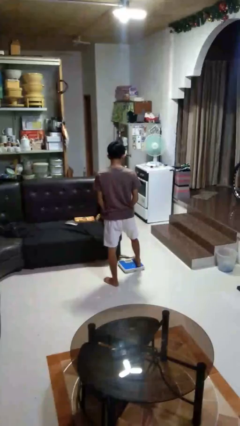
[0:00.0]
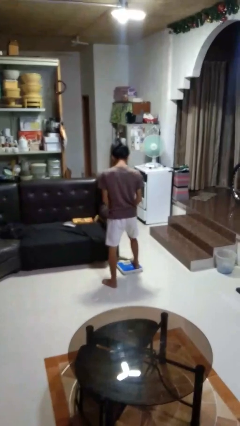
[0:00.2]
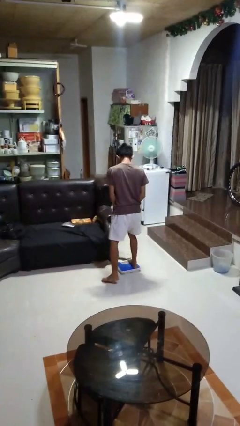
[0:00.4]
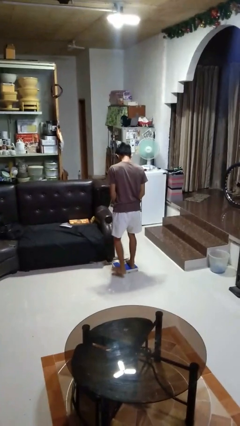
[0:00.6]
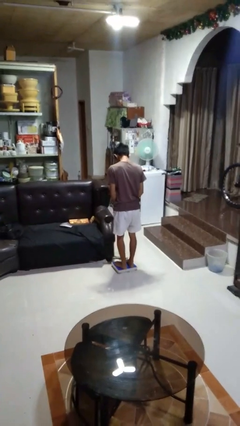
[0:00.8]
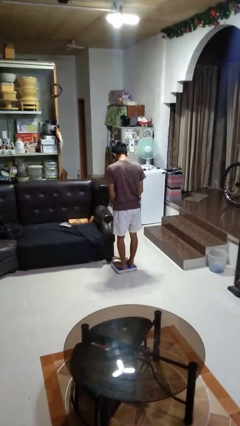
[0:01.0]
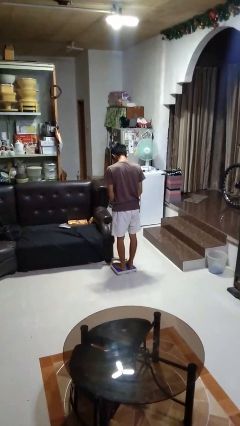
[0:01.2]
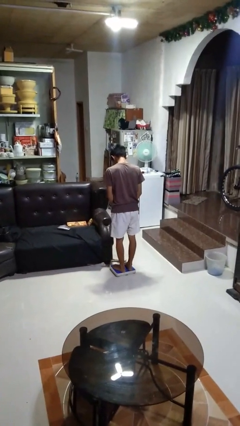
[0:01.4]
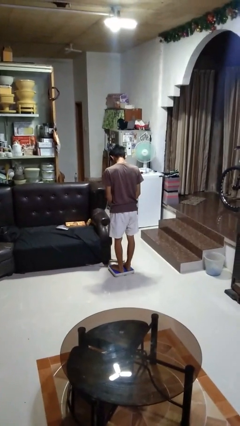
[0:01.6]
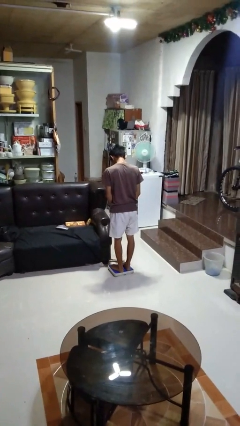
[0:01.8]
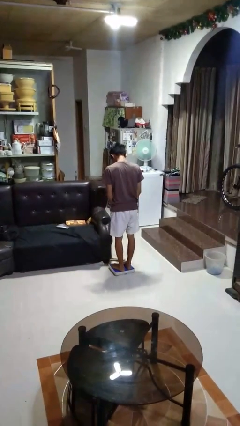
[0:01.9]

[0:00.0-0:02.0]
person uses bodyweight scale

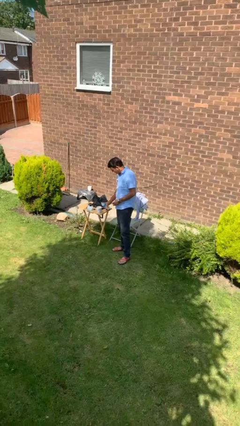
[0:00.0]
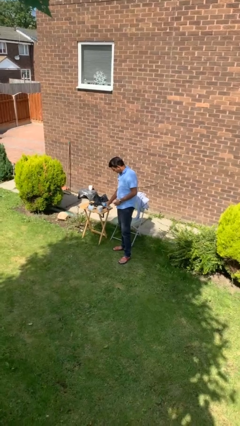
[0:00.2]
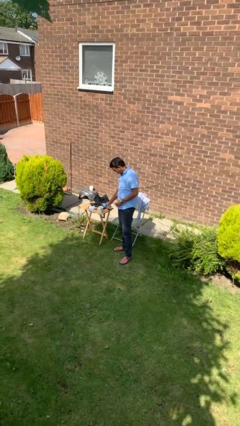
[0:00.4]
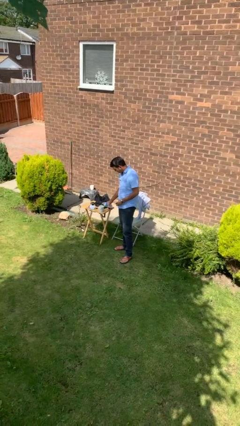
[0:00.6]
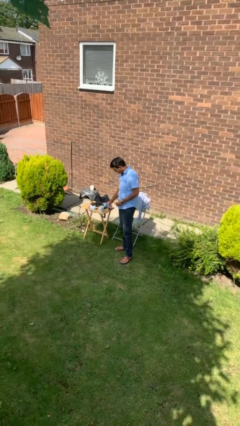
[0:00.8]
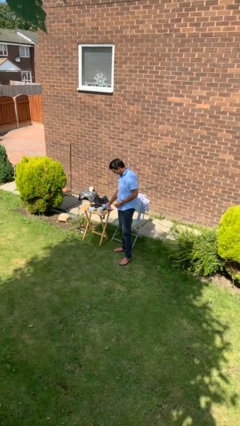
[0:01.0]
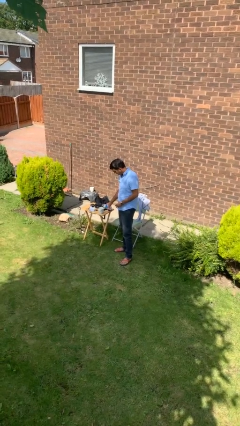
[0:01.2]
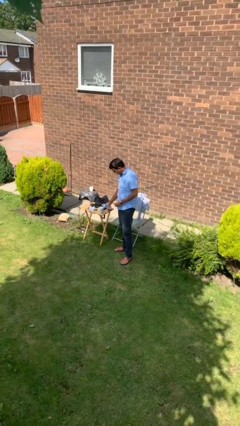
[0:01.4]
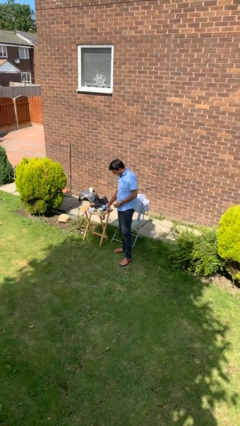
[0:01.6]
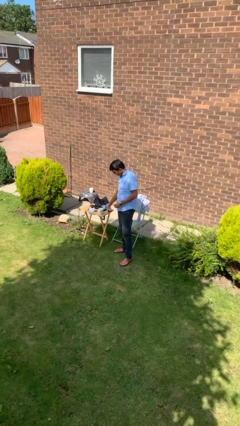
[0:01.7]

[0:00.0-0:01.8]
person pours liquid into cup

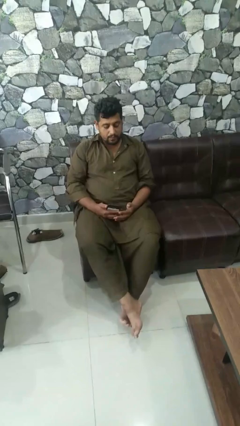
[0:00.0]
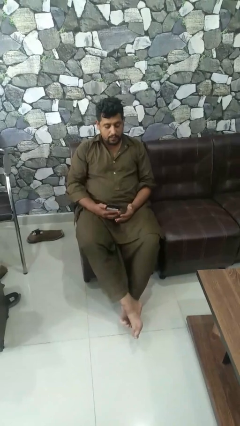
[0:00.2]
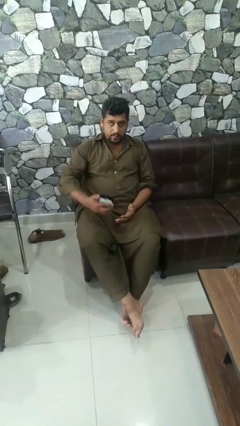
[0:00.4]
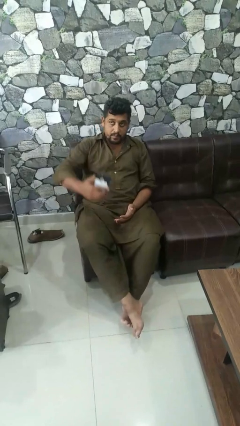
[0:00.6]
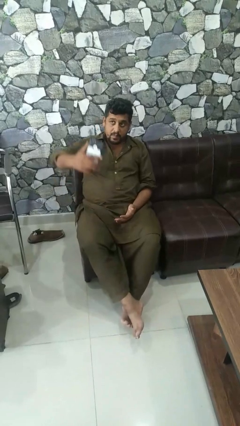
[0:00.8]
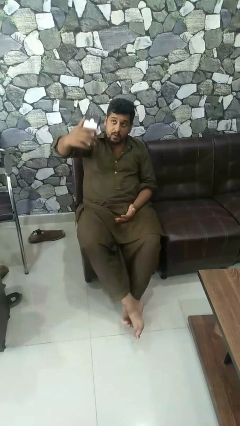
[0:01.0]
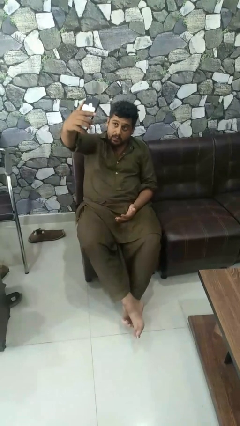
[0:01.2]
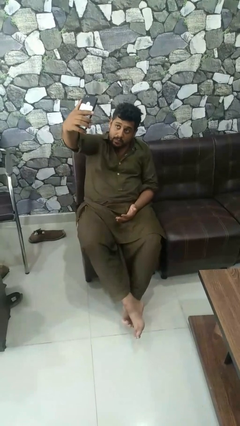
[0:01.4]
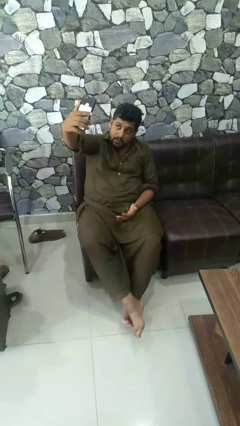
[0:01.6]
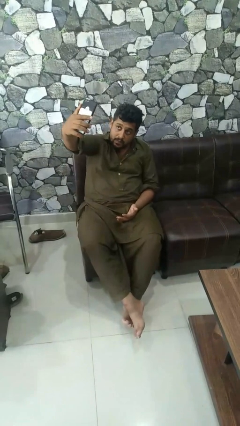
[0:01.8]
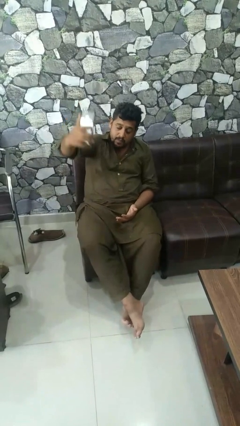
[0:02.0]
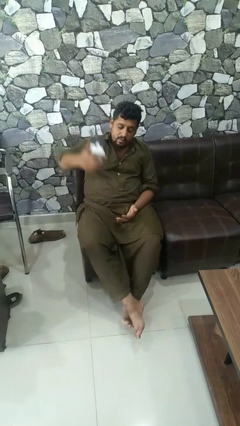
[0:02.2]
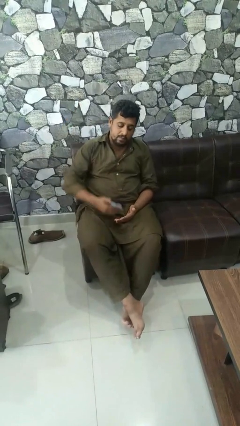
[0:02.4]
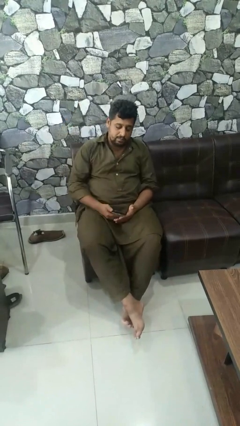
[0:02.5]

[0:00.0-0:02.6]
person takes selfie

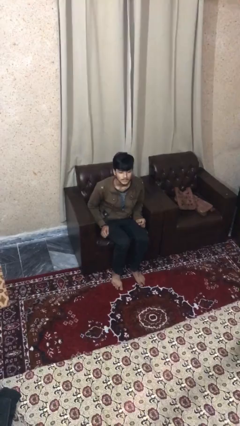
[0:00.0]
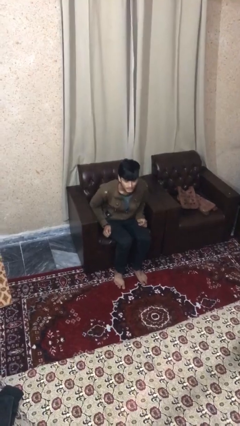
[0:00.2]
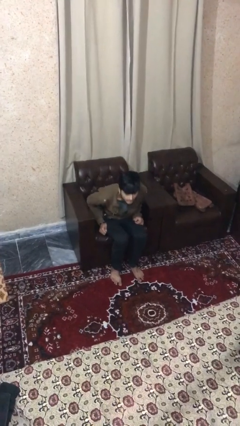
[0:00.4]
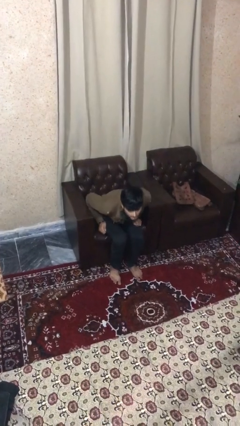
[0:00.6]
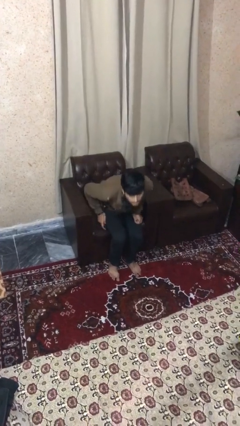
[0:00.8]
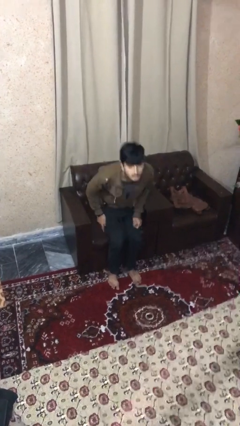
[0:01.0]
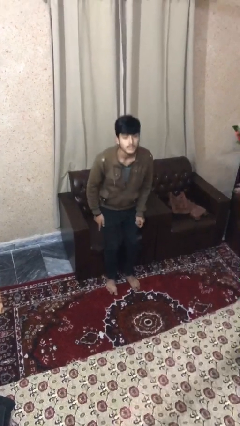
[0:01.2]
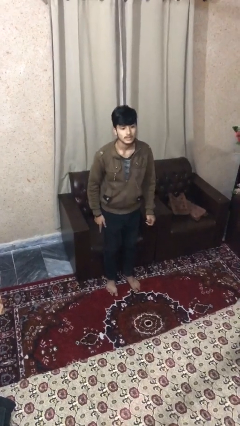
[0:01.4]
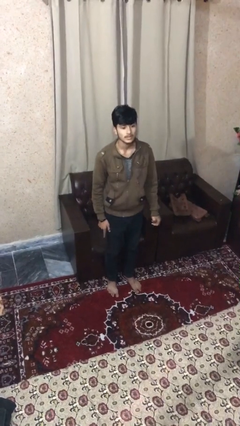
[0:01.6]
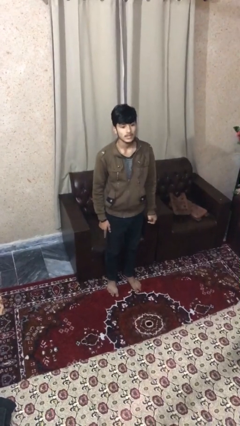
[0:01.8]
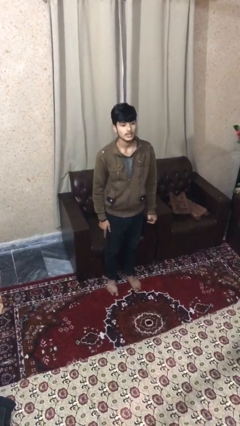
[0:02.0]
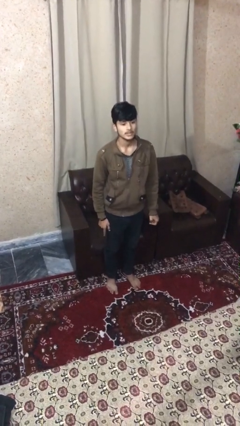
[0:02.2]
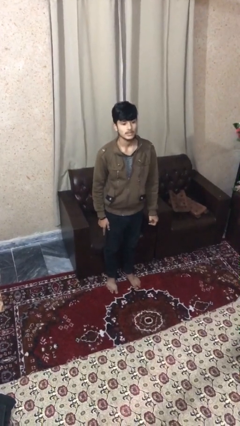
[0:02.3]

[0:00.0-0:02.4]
person stands up

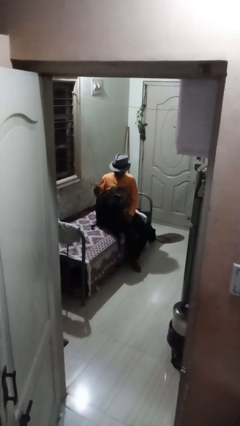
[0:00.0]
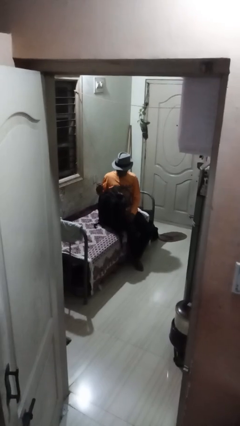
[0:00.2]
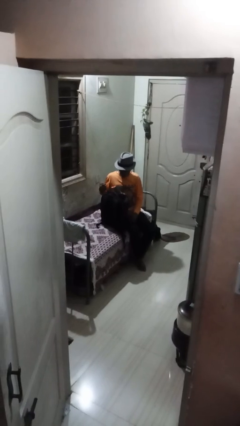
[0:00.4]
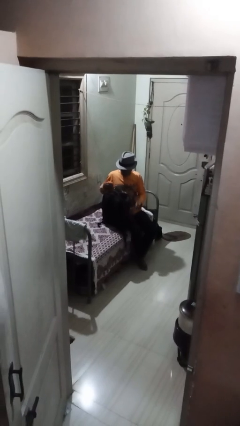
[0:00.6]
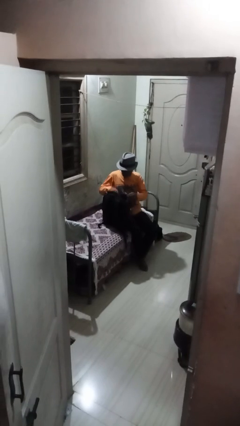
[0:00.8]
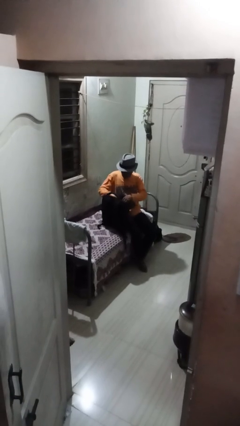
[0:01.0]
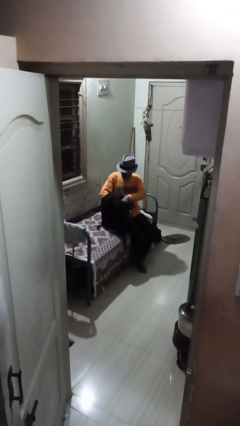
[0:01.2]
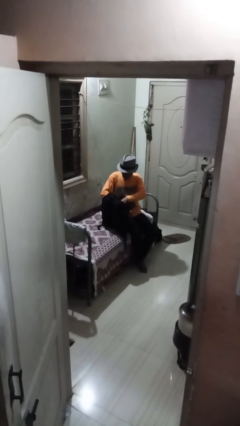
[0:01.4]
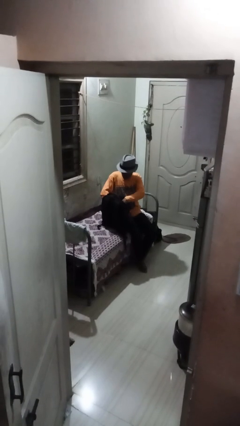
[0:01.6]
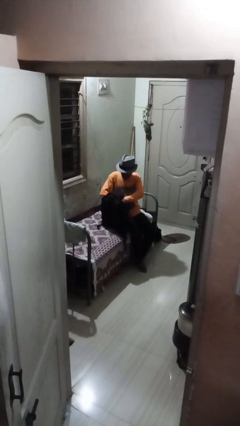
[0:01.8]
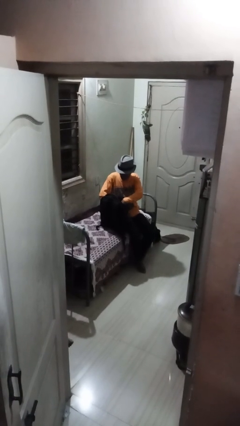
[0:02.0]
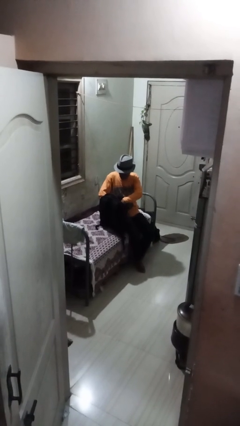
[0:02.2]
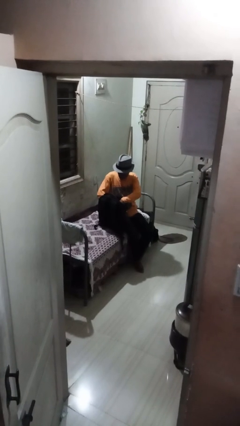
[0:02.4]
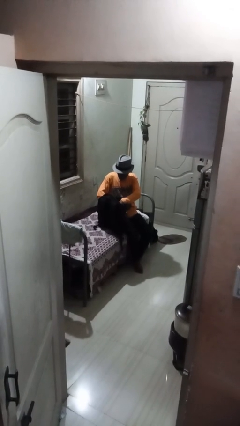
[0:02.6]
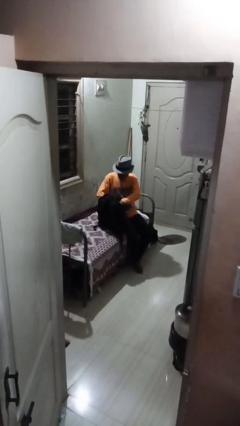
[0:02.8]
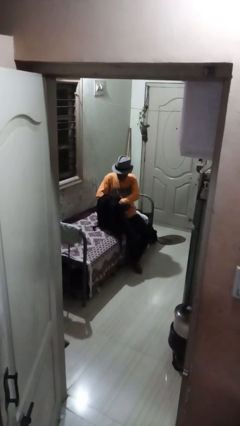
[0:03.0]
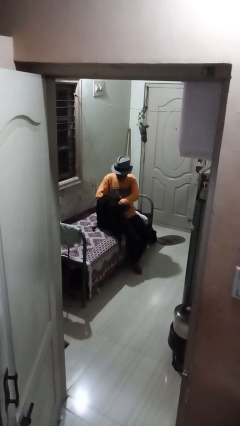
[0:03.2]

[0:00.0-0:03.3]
person searches in backpack

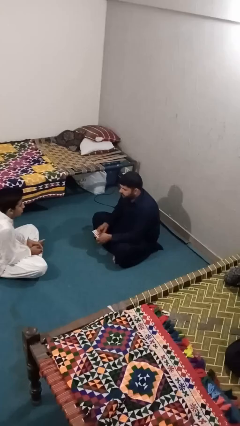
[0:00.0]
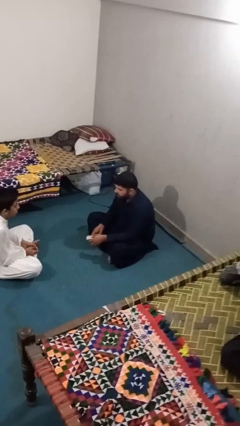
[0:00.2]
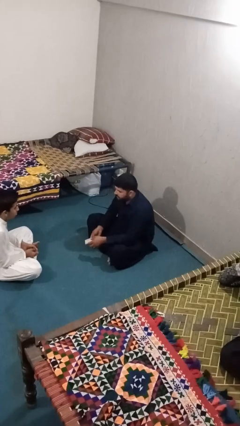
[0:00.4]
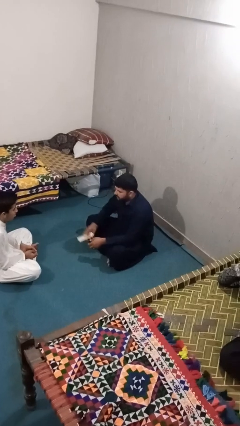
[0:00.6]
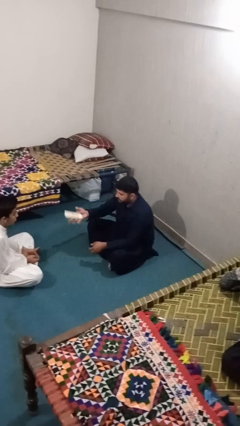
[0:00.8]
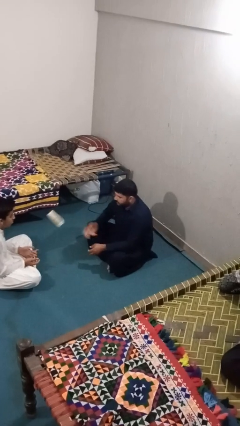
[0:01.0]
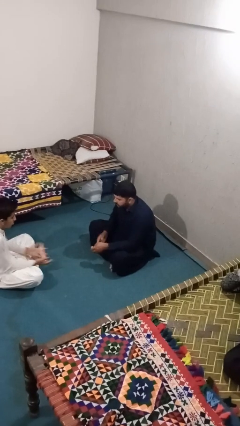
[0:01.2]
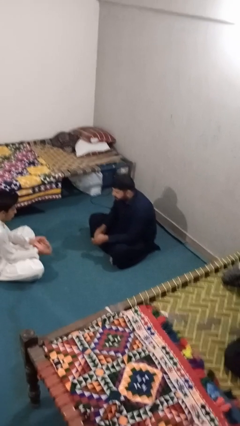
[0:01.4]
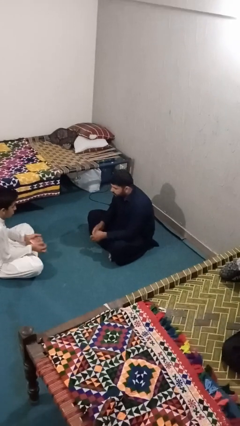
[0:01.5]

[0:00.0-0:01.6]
person throws object to person

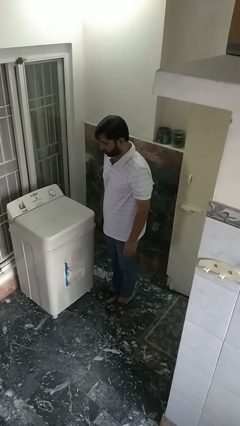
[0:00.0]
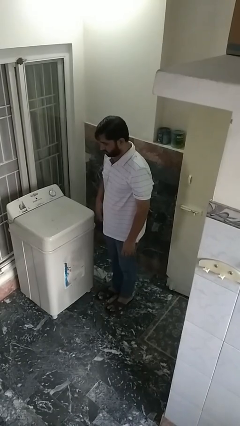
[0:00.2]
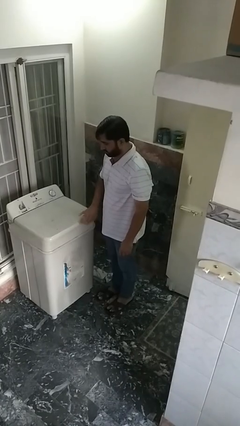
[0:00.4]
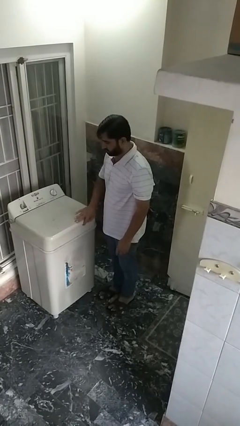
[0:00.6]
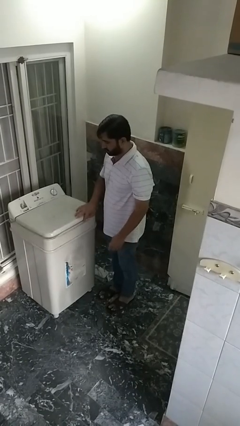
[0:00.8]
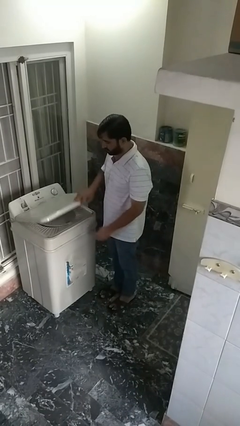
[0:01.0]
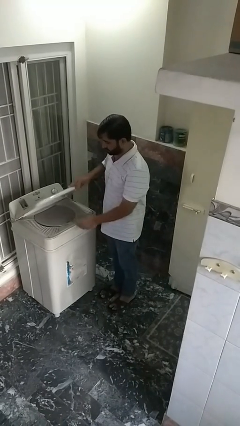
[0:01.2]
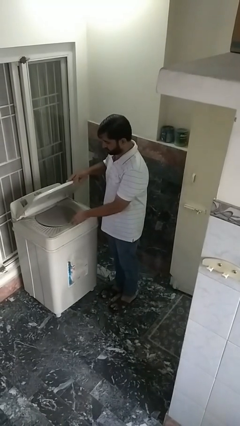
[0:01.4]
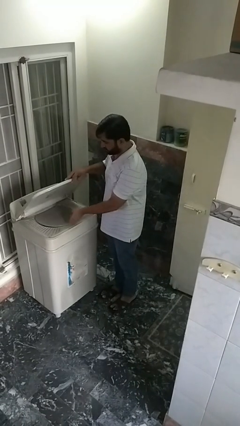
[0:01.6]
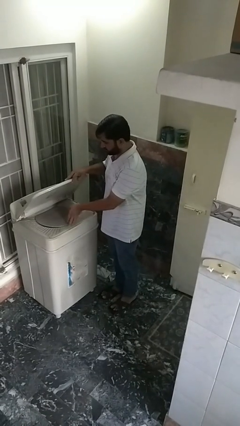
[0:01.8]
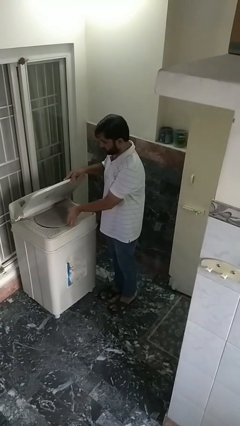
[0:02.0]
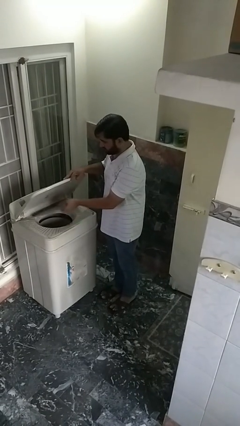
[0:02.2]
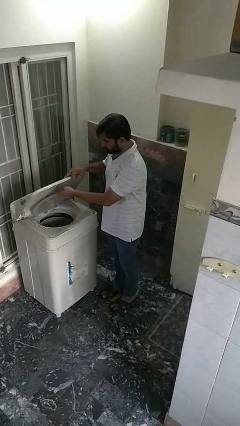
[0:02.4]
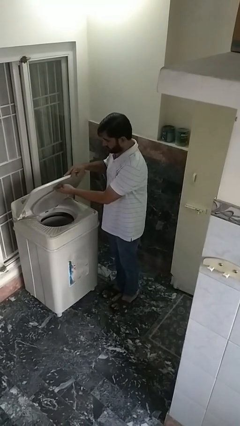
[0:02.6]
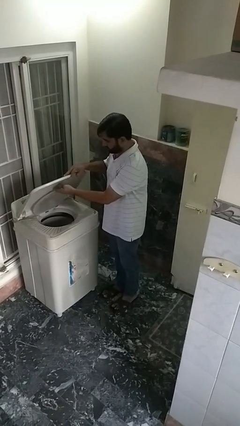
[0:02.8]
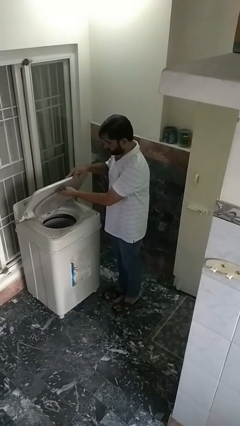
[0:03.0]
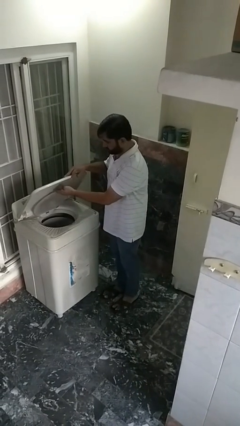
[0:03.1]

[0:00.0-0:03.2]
person opens clothes washer
